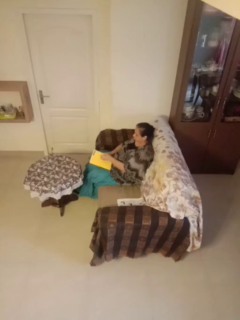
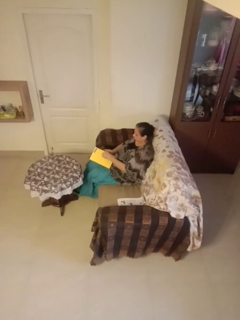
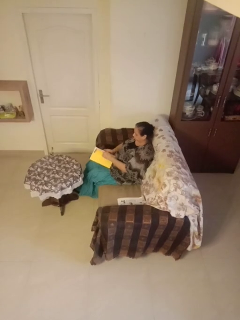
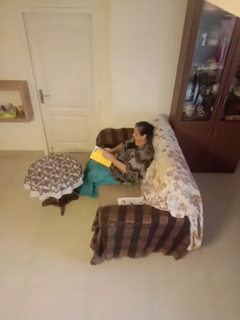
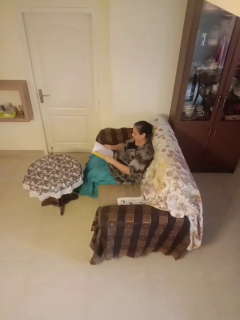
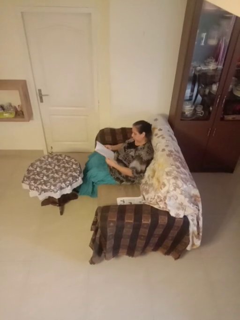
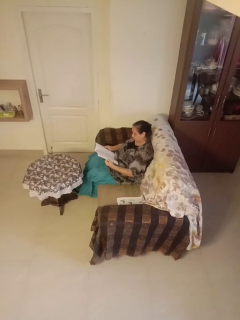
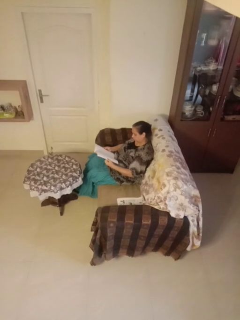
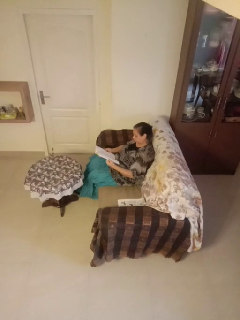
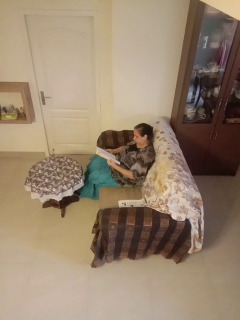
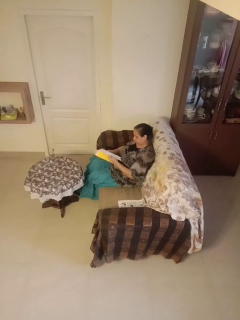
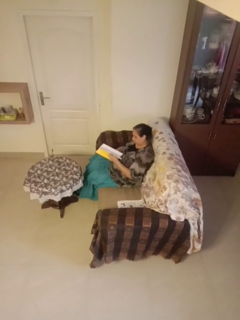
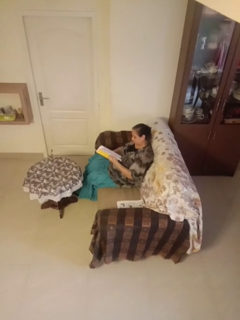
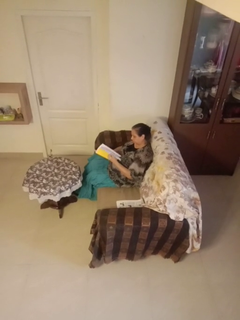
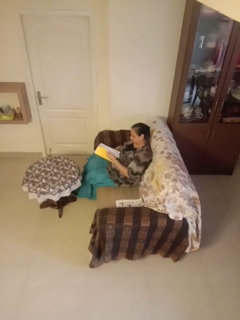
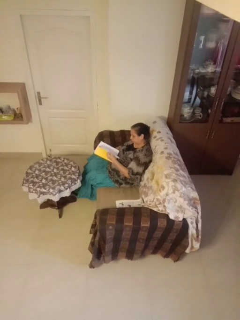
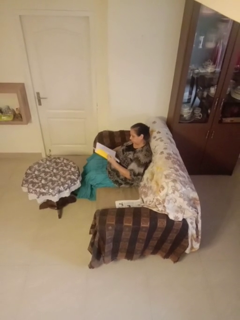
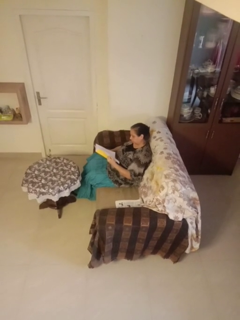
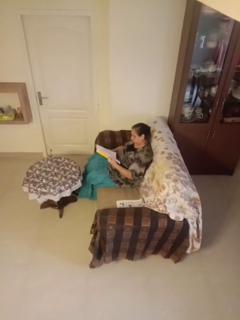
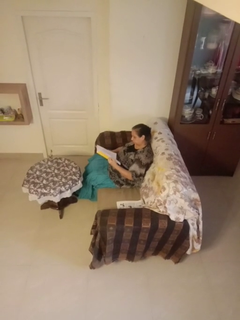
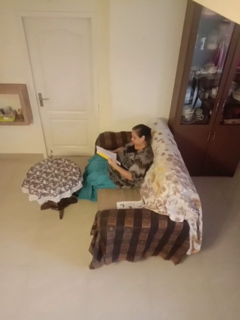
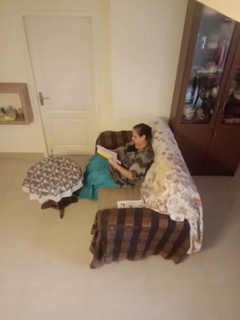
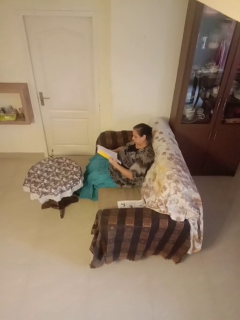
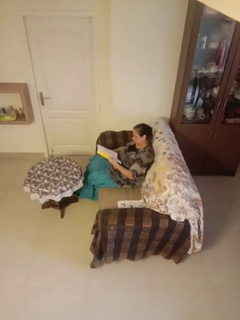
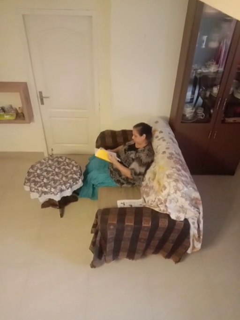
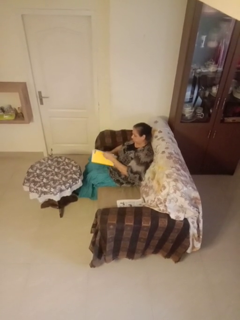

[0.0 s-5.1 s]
person reads magazine

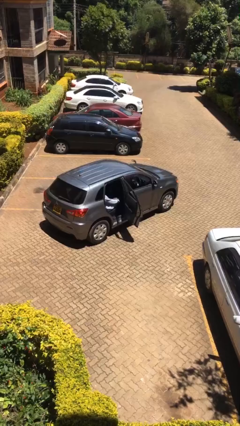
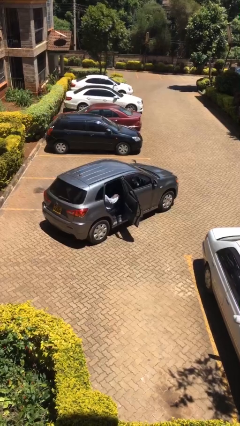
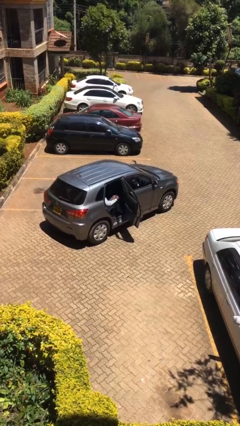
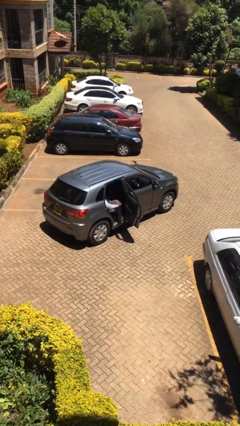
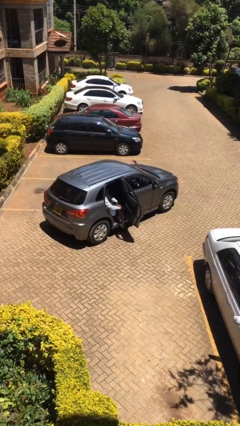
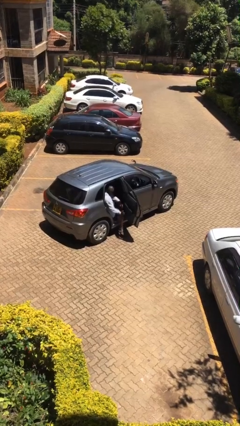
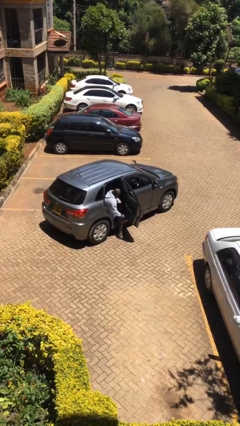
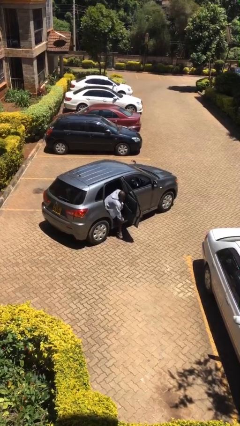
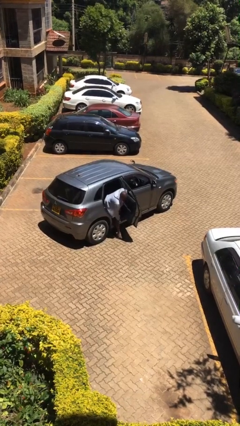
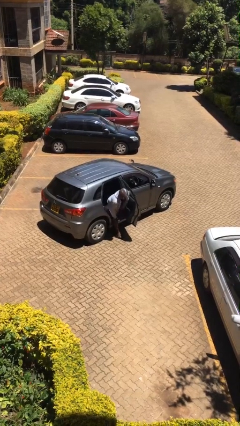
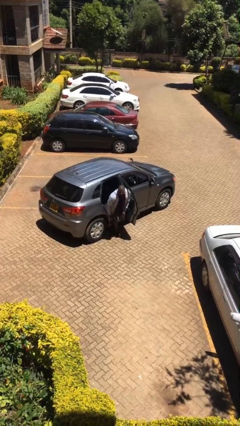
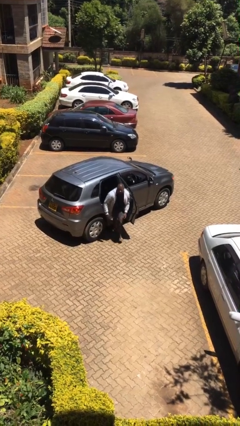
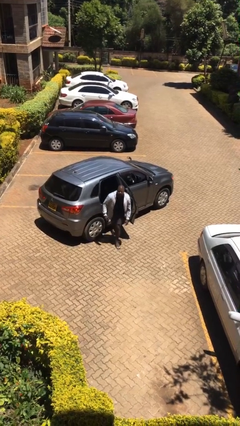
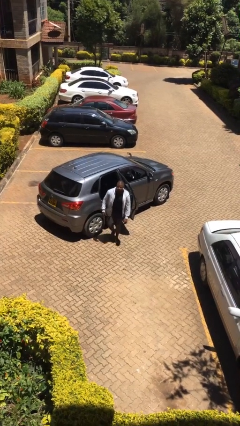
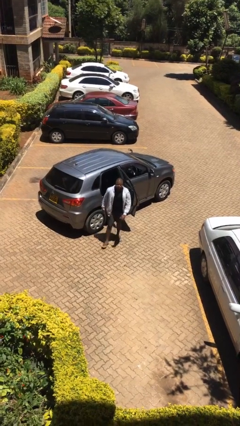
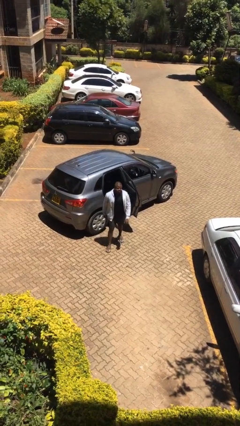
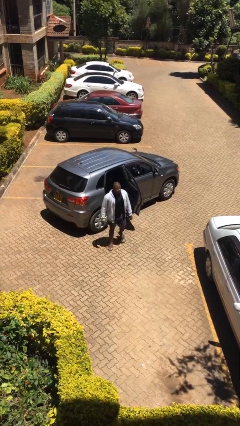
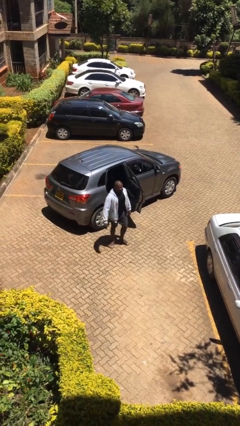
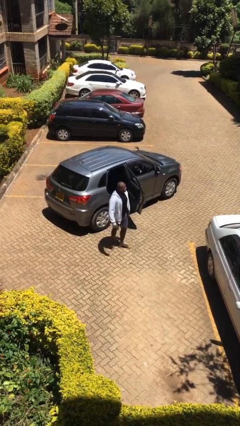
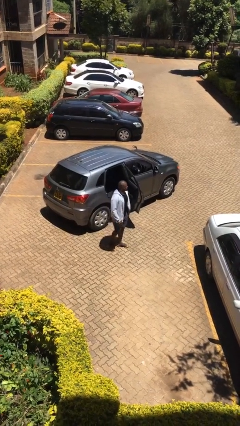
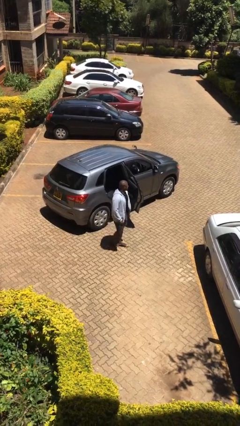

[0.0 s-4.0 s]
person exits car

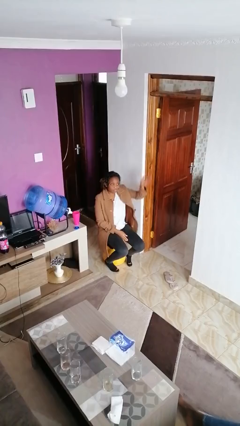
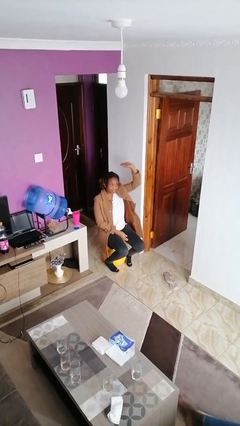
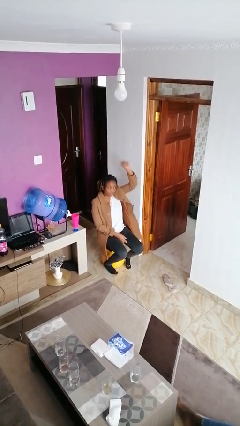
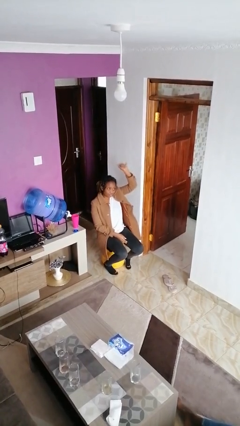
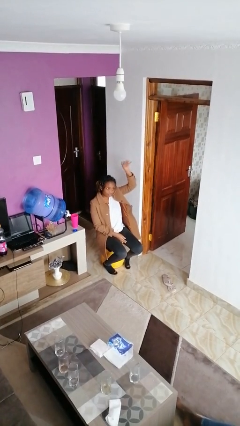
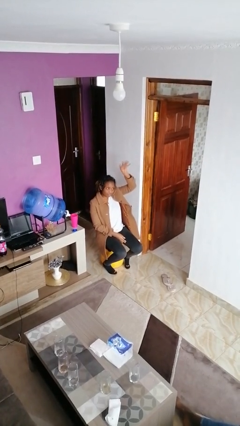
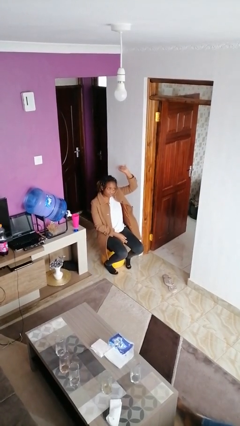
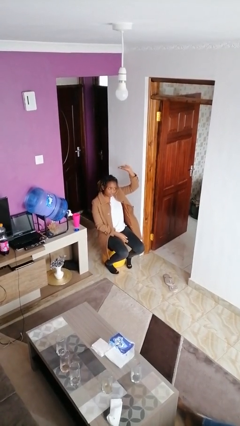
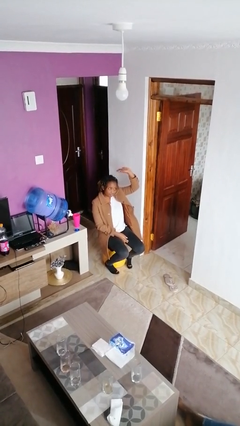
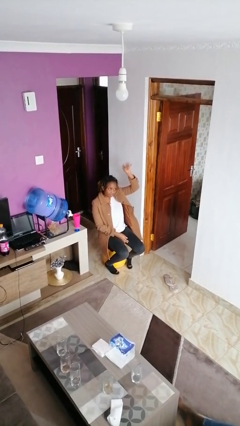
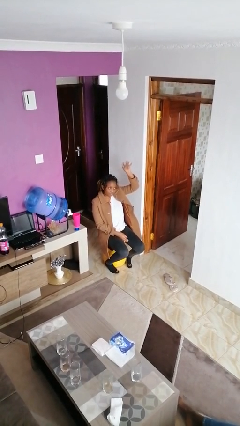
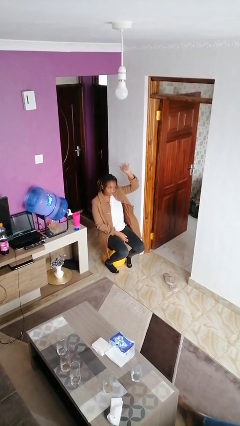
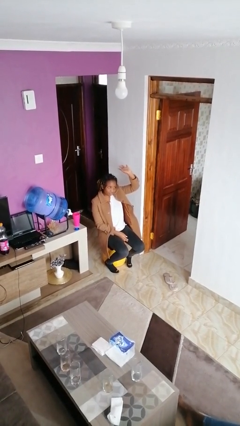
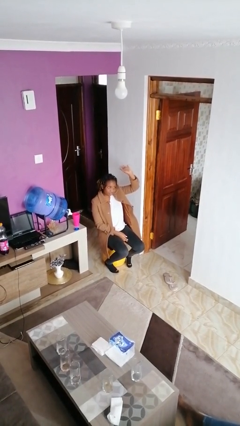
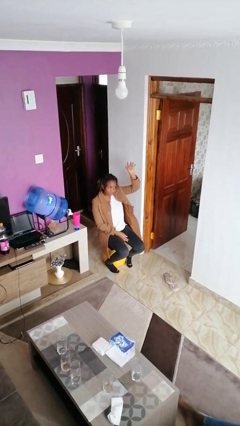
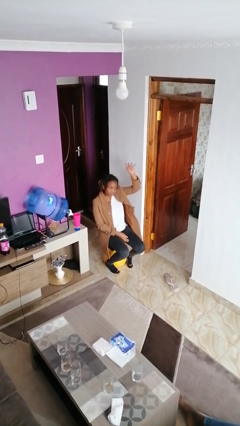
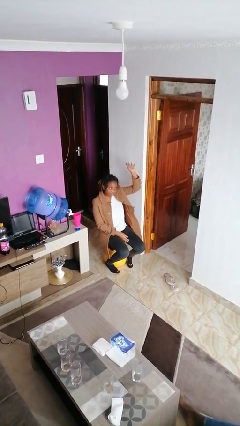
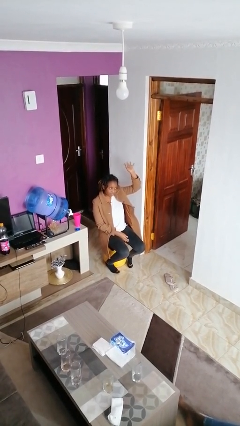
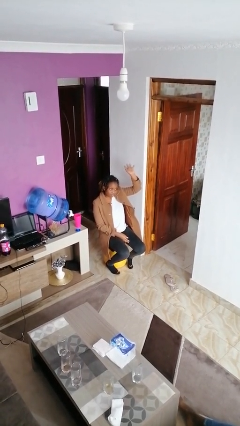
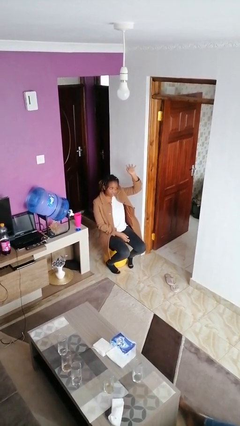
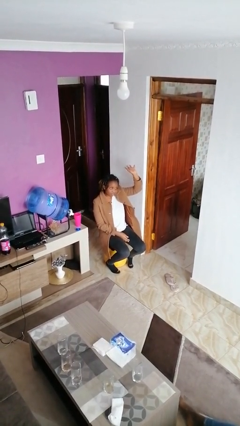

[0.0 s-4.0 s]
person gestures raise hand

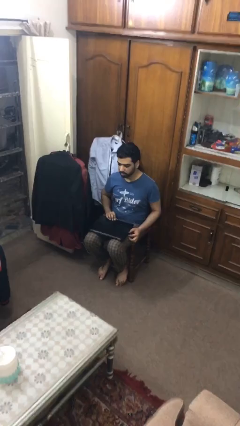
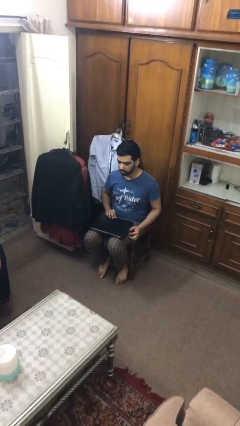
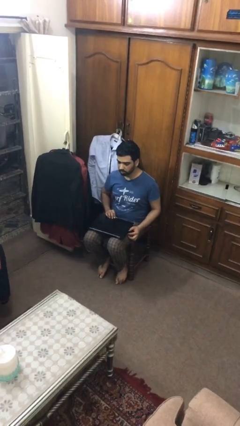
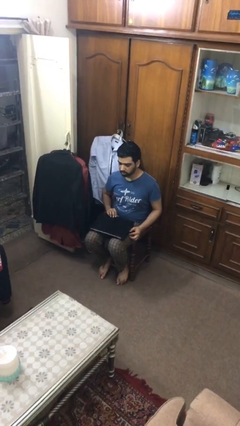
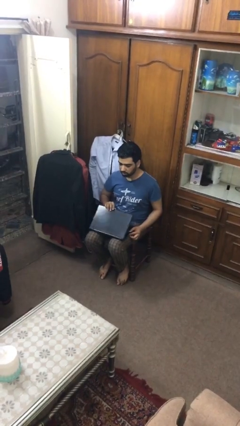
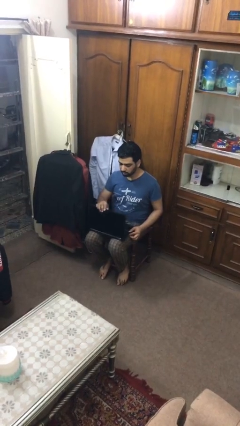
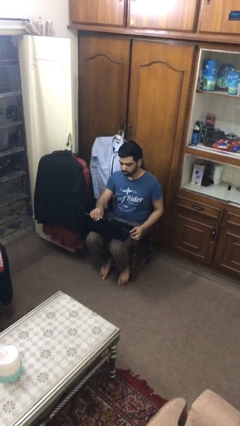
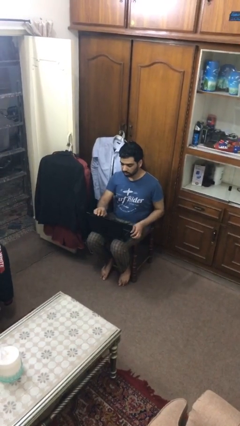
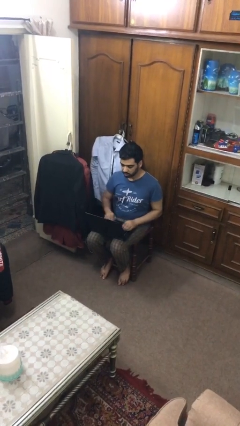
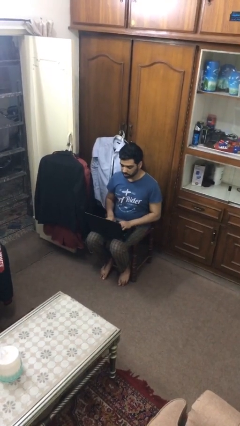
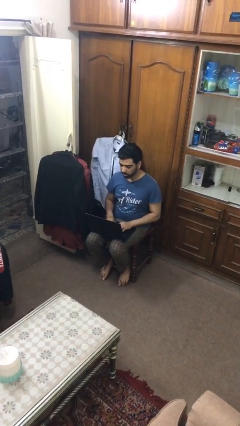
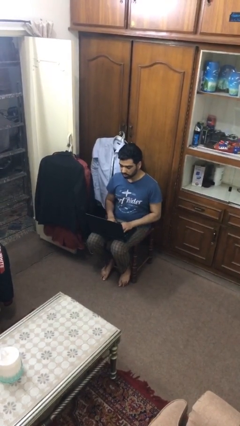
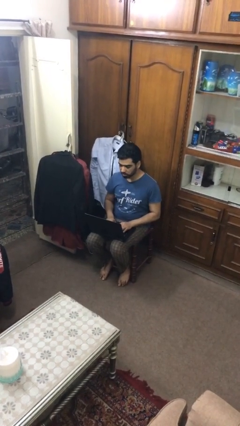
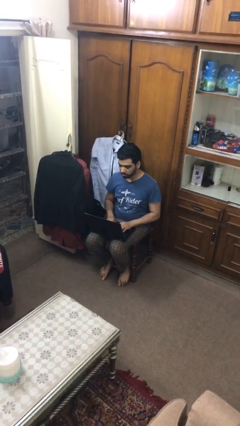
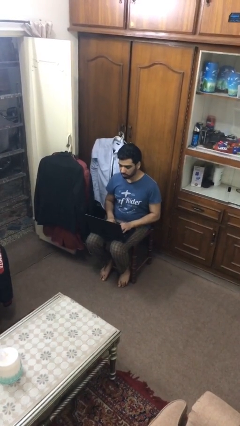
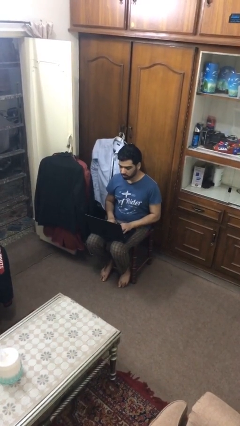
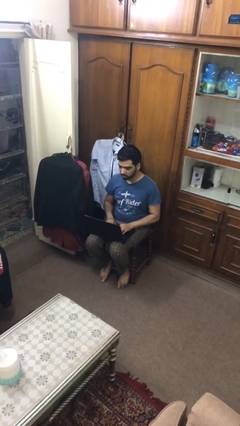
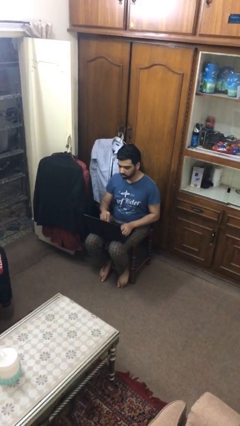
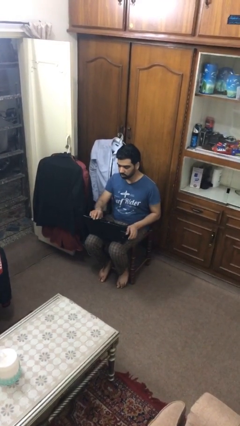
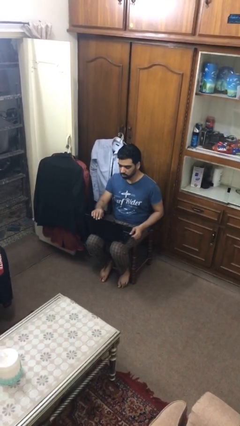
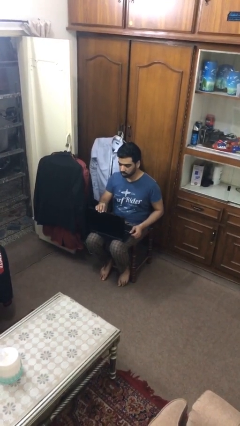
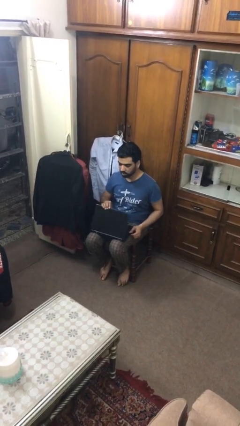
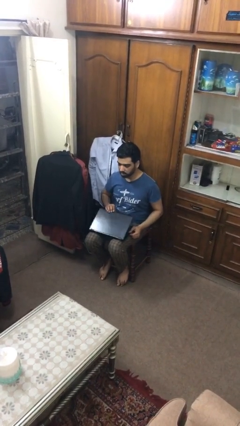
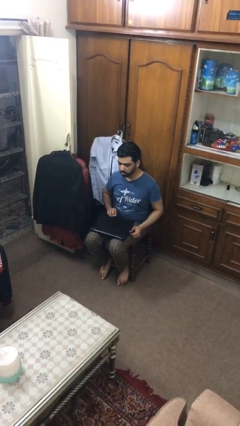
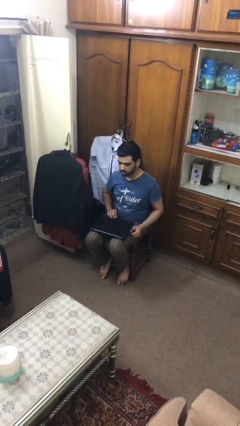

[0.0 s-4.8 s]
person interacts with laptop

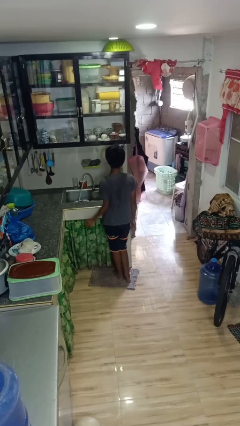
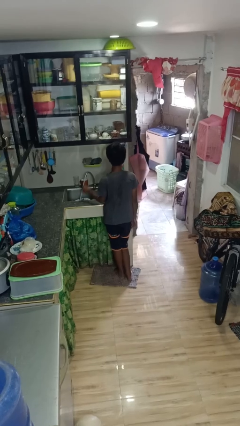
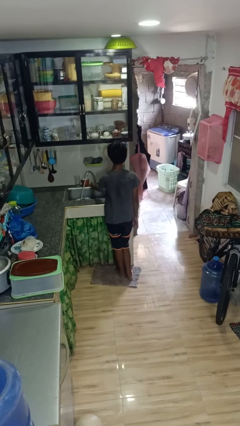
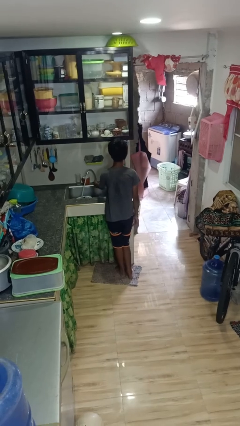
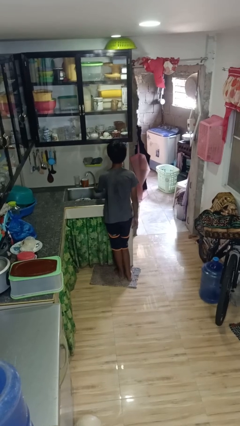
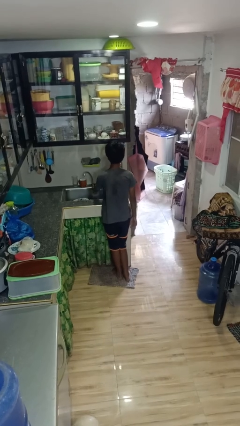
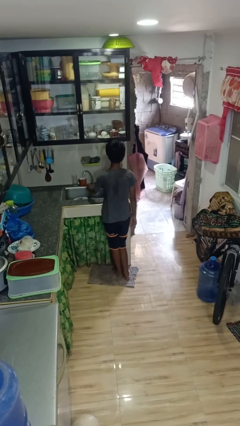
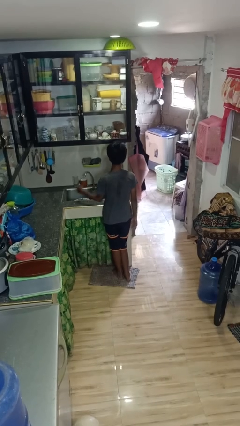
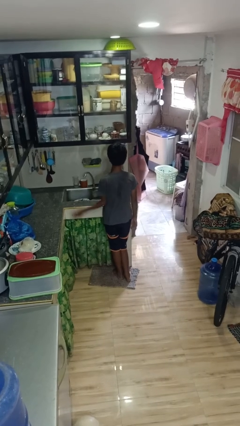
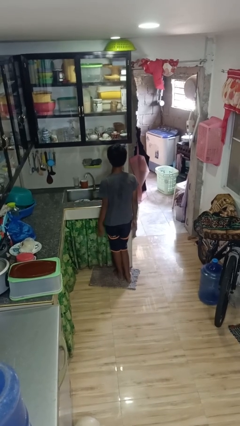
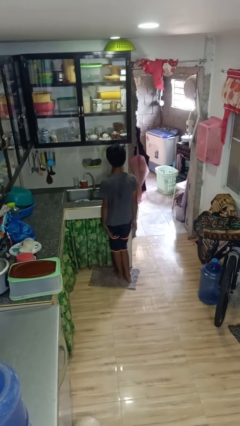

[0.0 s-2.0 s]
person turns off faucet
